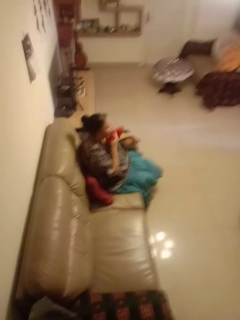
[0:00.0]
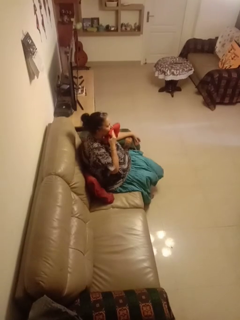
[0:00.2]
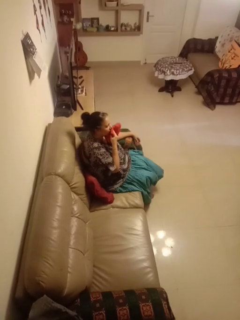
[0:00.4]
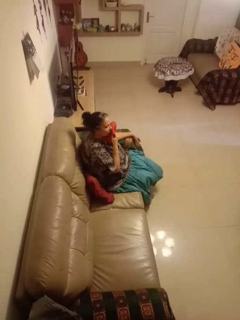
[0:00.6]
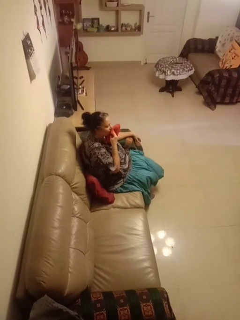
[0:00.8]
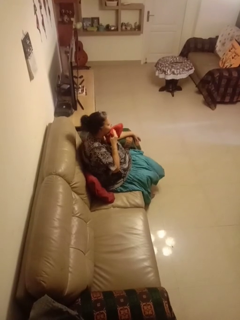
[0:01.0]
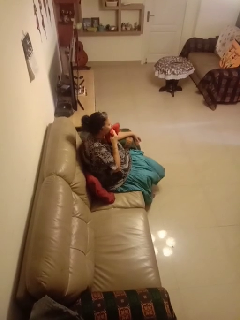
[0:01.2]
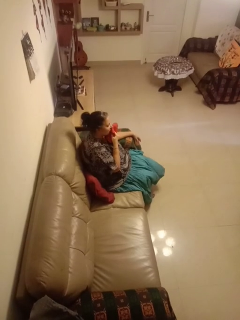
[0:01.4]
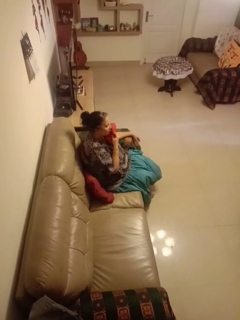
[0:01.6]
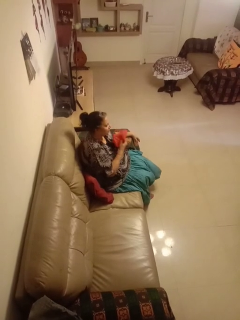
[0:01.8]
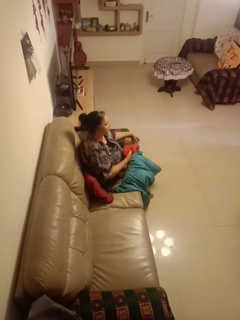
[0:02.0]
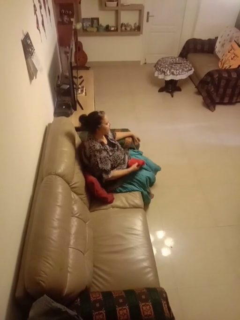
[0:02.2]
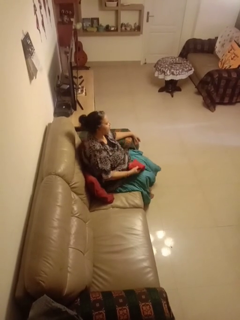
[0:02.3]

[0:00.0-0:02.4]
person wipes mouth with napkin

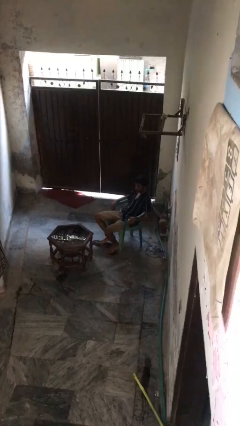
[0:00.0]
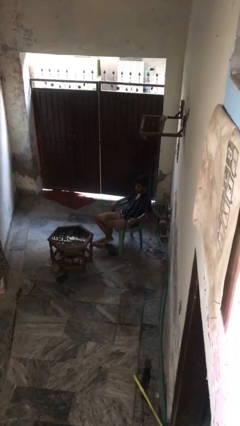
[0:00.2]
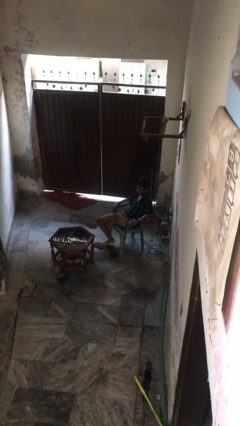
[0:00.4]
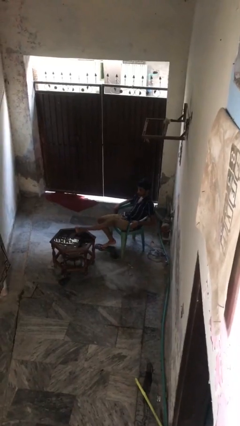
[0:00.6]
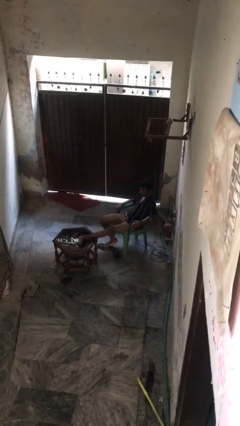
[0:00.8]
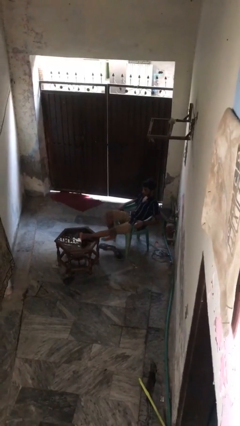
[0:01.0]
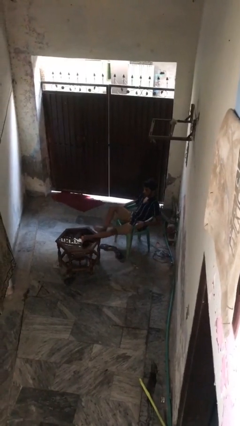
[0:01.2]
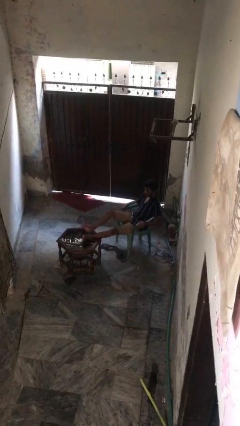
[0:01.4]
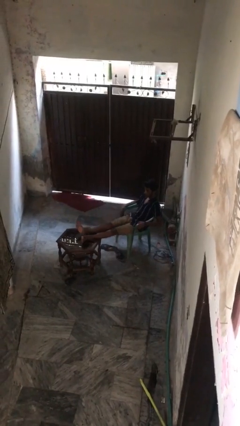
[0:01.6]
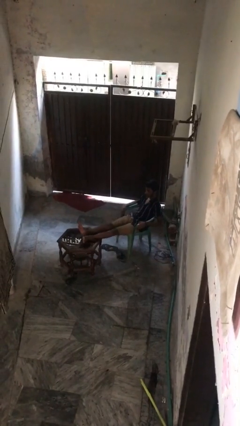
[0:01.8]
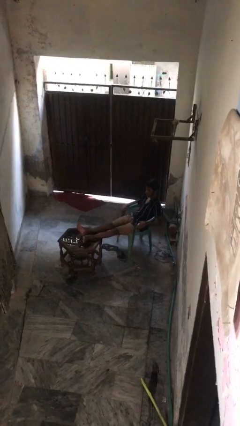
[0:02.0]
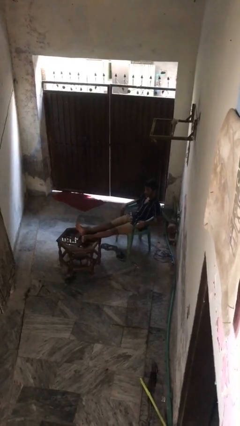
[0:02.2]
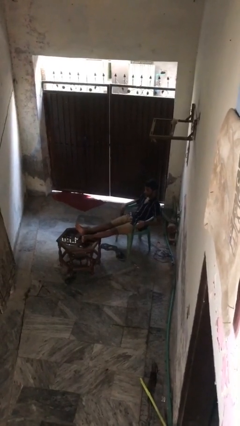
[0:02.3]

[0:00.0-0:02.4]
person puts feet up

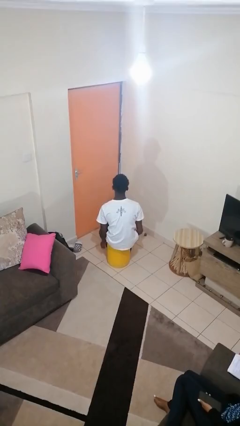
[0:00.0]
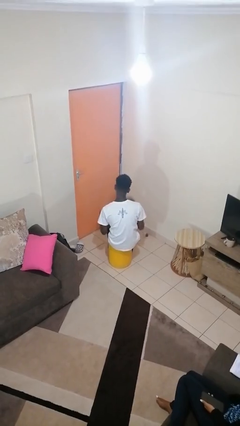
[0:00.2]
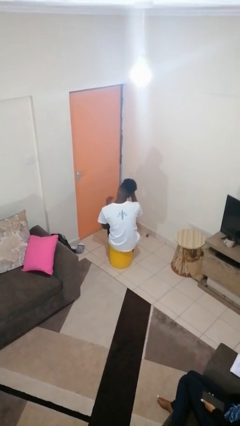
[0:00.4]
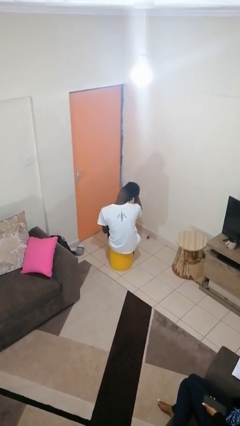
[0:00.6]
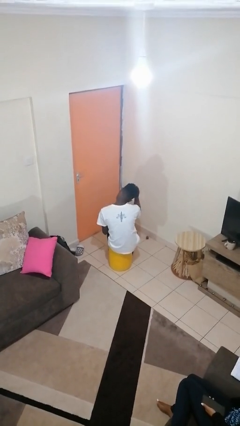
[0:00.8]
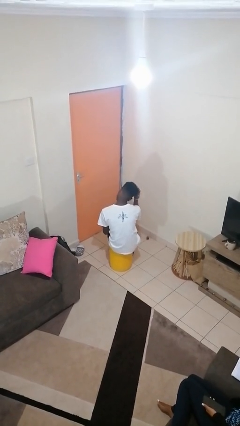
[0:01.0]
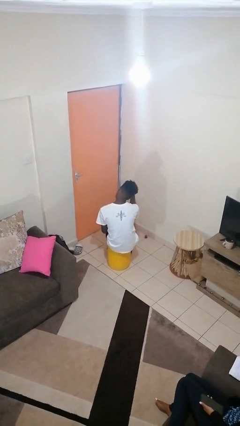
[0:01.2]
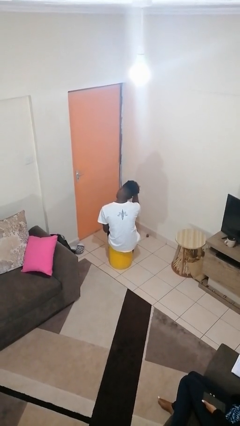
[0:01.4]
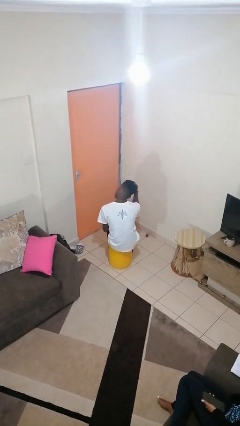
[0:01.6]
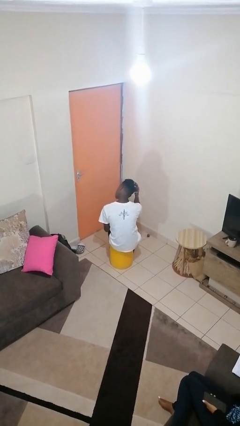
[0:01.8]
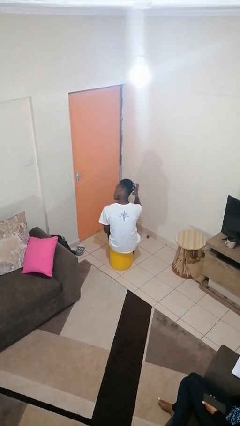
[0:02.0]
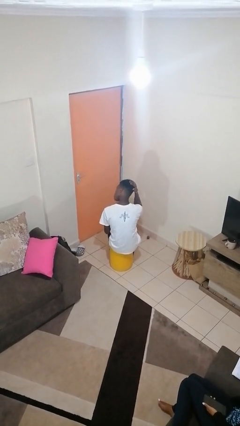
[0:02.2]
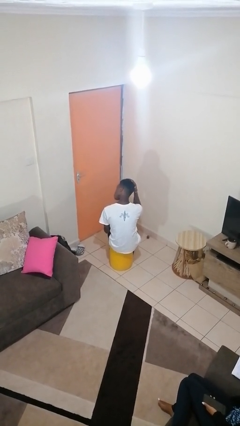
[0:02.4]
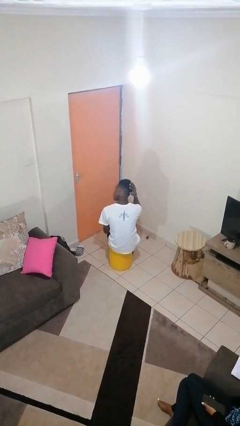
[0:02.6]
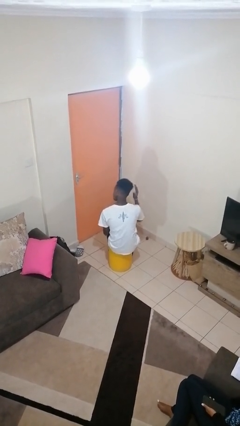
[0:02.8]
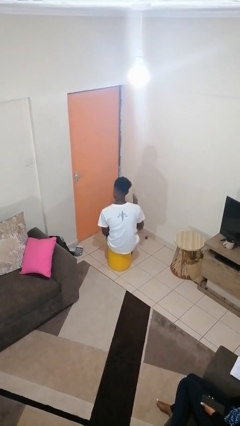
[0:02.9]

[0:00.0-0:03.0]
person strokes hair

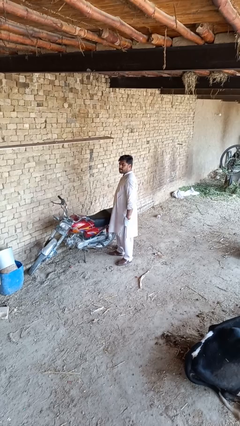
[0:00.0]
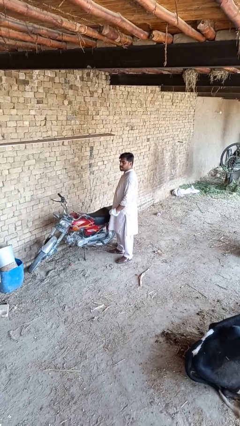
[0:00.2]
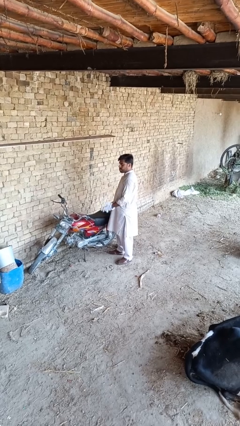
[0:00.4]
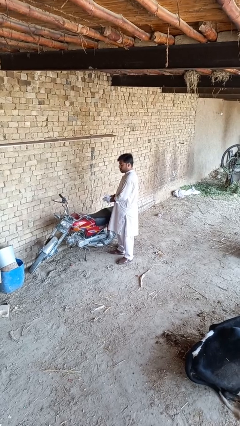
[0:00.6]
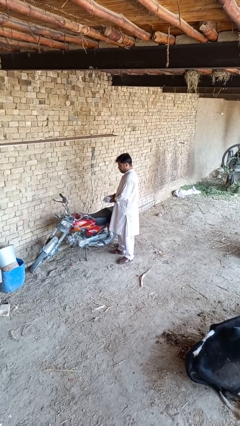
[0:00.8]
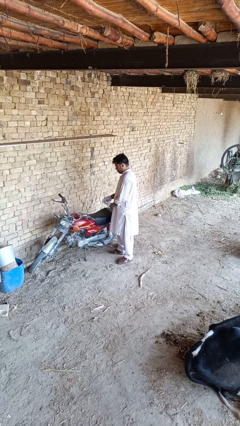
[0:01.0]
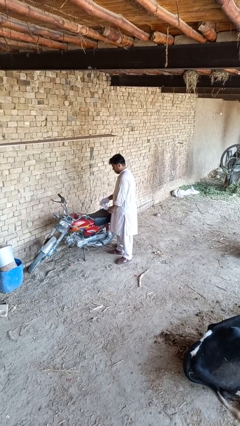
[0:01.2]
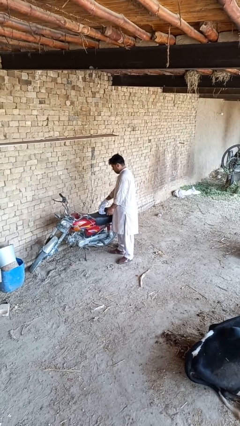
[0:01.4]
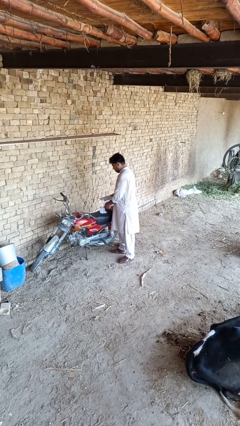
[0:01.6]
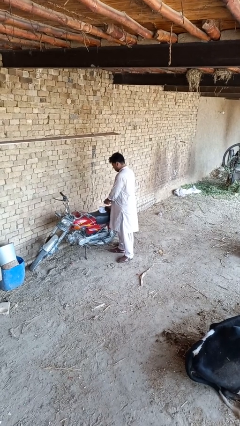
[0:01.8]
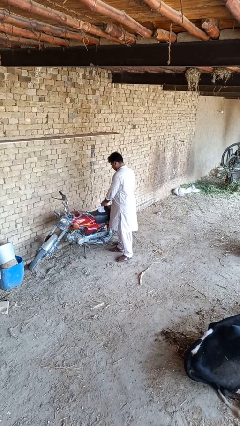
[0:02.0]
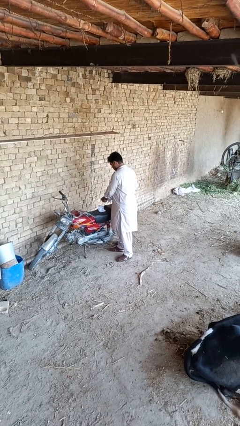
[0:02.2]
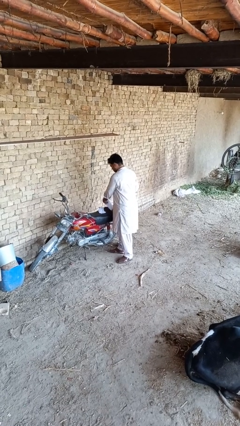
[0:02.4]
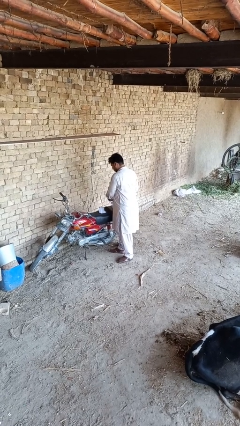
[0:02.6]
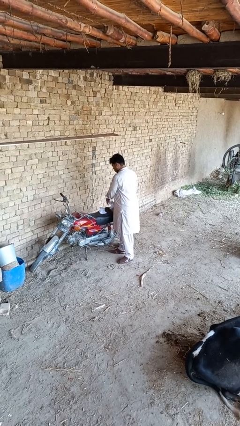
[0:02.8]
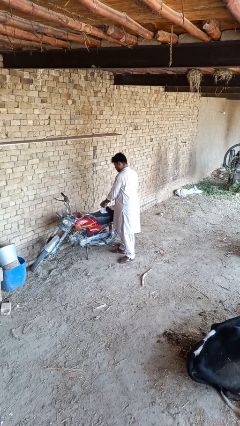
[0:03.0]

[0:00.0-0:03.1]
person takes off gloves

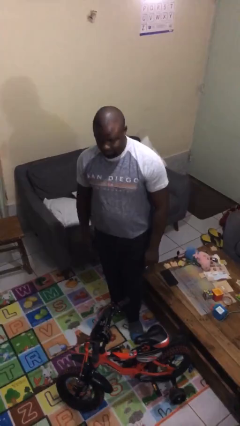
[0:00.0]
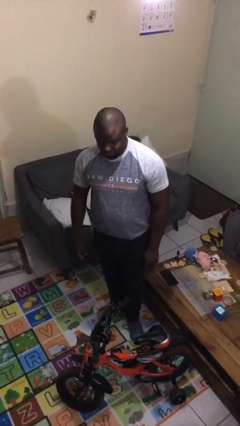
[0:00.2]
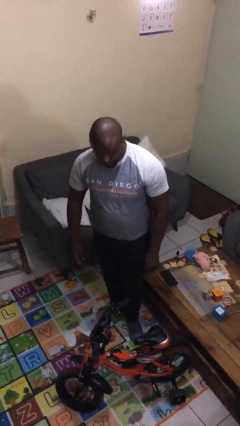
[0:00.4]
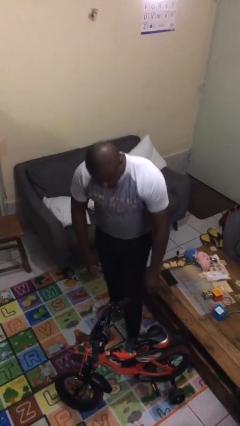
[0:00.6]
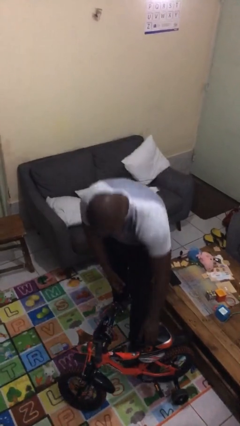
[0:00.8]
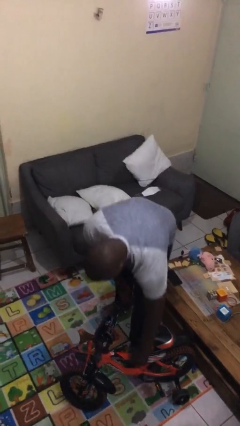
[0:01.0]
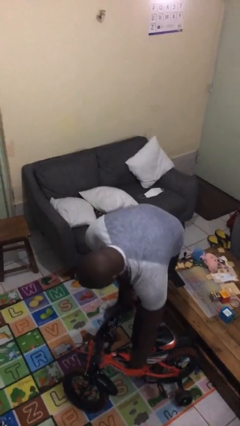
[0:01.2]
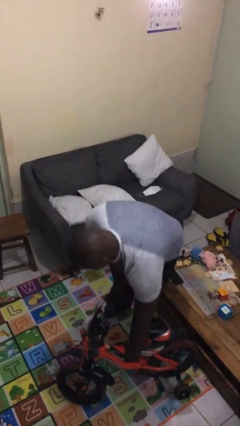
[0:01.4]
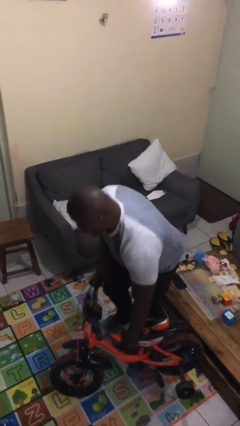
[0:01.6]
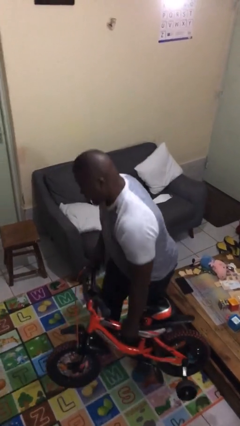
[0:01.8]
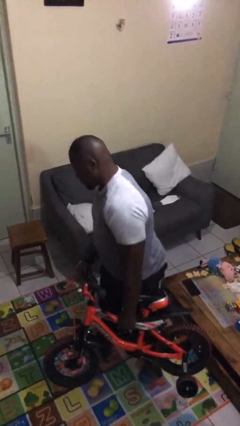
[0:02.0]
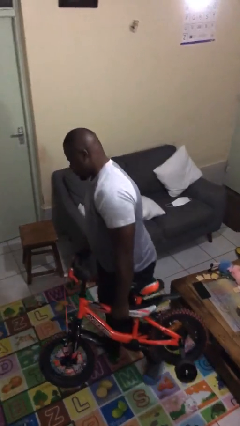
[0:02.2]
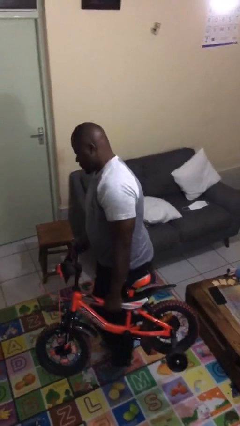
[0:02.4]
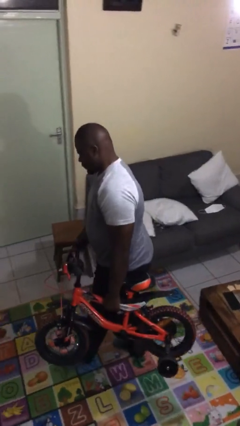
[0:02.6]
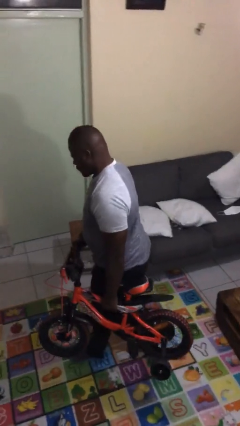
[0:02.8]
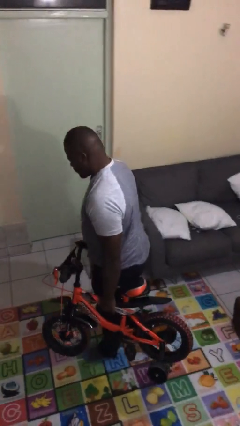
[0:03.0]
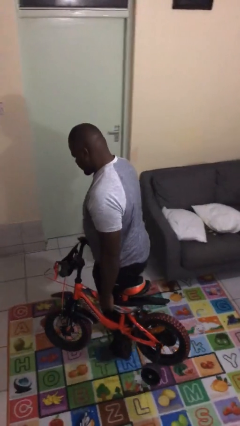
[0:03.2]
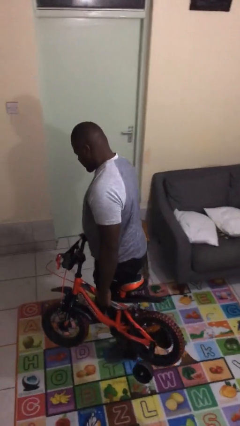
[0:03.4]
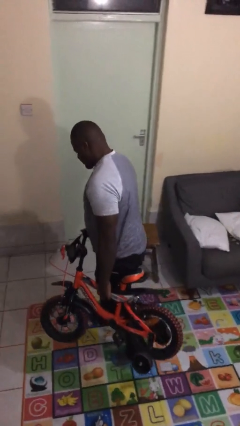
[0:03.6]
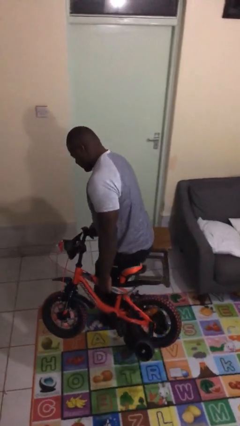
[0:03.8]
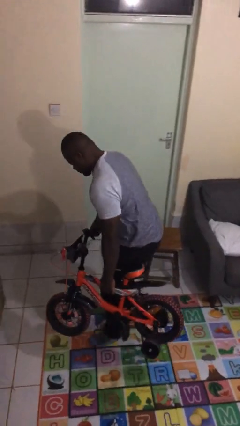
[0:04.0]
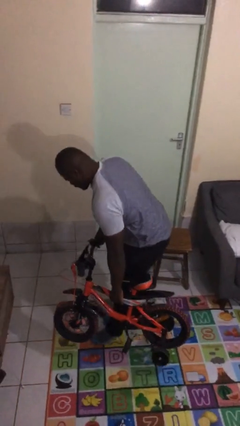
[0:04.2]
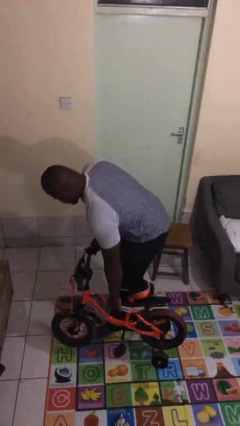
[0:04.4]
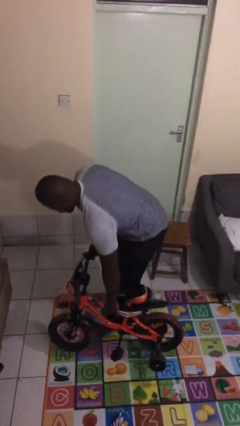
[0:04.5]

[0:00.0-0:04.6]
person carries bicycle

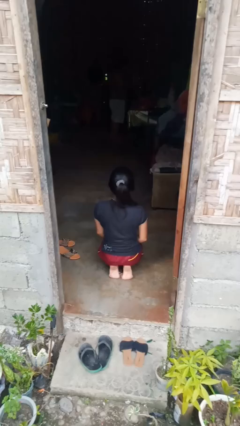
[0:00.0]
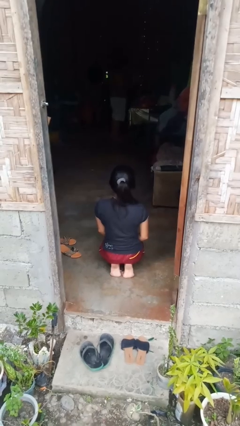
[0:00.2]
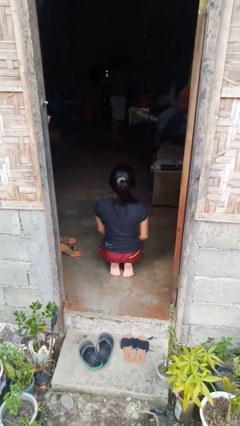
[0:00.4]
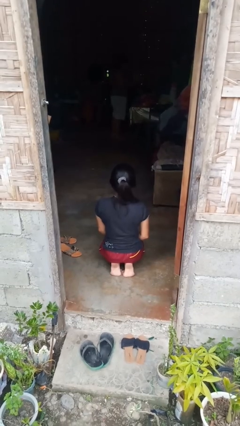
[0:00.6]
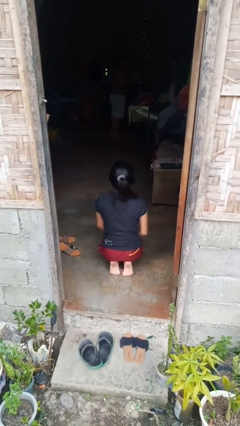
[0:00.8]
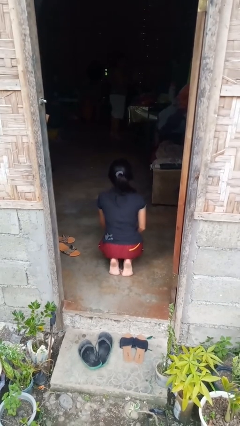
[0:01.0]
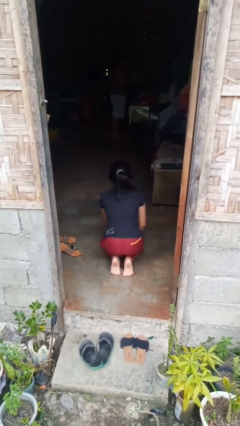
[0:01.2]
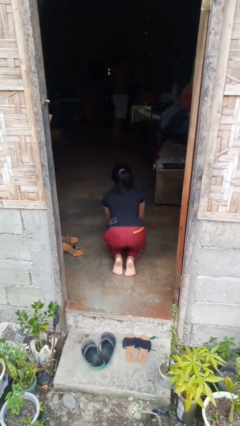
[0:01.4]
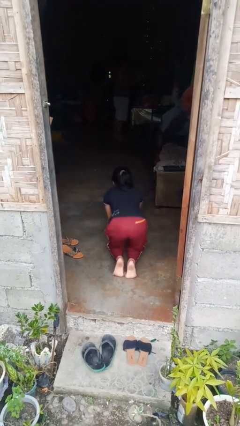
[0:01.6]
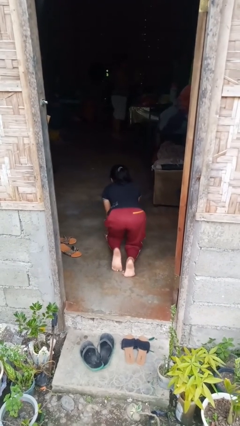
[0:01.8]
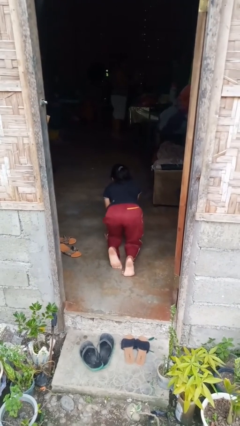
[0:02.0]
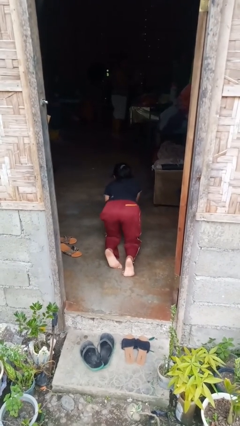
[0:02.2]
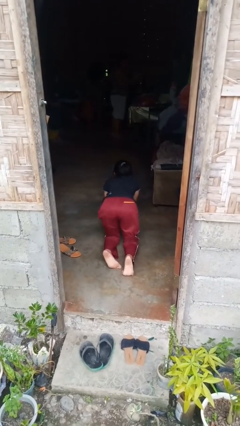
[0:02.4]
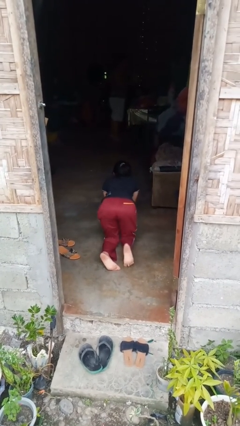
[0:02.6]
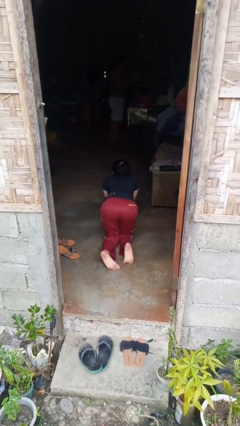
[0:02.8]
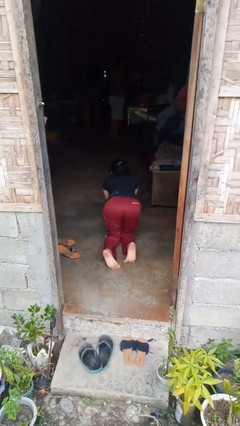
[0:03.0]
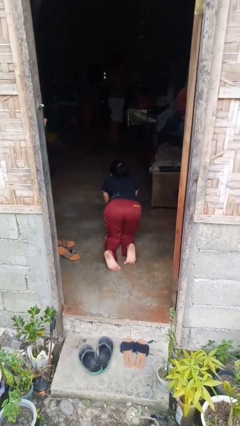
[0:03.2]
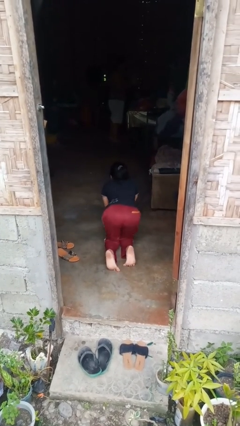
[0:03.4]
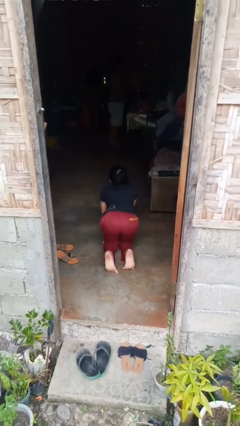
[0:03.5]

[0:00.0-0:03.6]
person crawls
